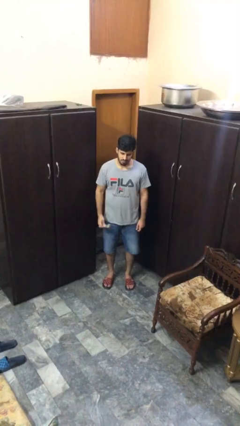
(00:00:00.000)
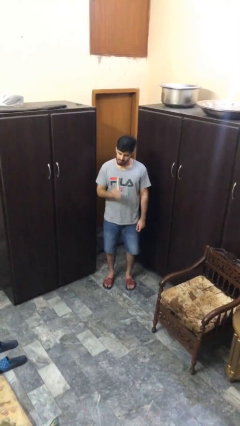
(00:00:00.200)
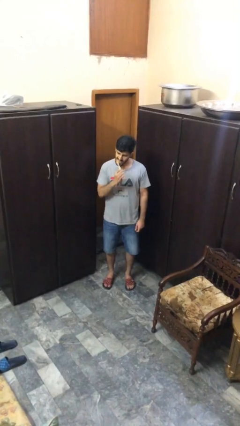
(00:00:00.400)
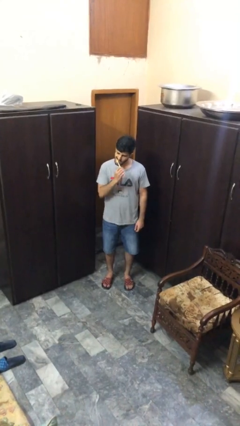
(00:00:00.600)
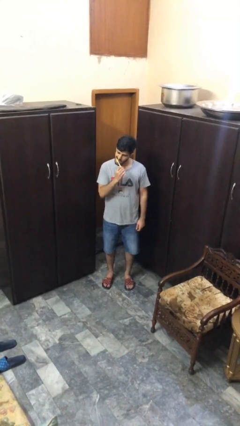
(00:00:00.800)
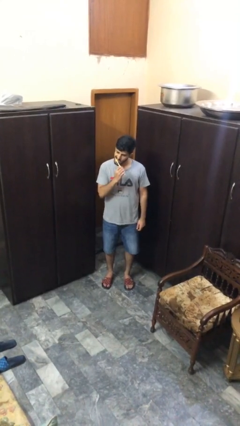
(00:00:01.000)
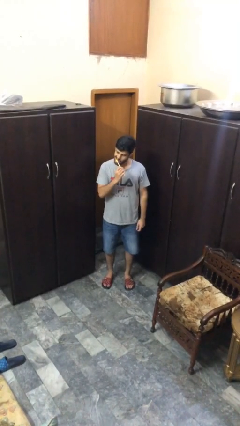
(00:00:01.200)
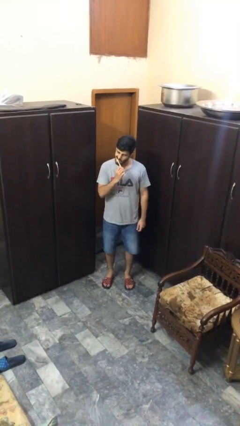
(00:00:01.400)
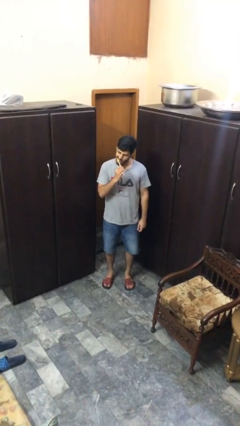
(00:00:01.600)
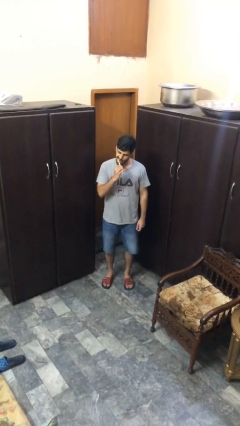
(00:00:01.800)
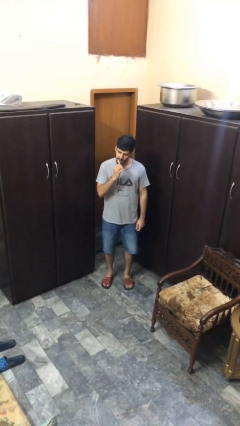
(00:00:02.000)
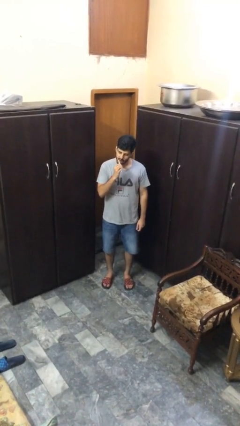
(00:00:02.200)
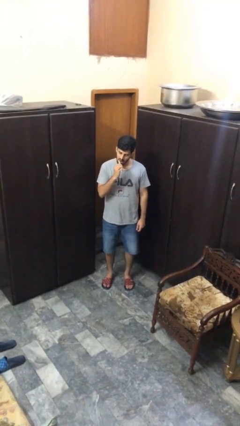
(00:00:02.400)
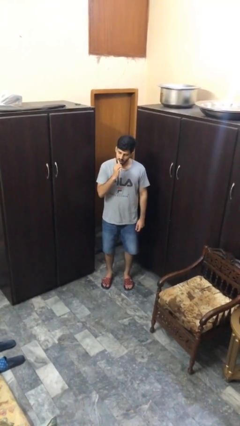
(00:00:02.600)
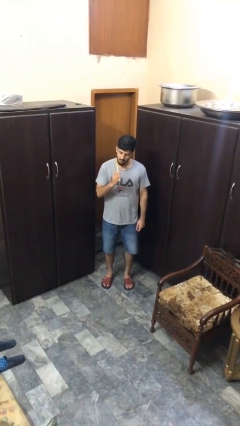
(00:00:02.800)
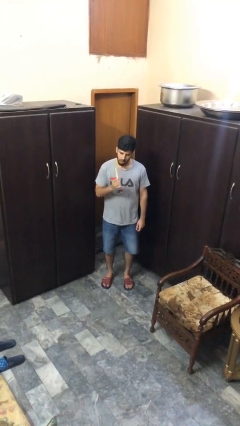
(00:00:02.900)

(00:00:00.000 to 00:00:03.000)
person brushes teeth

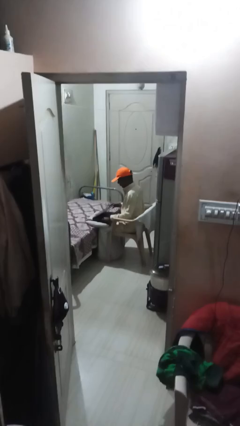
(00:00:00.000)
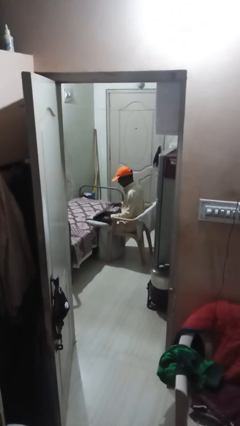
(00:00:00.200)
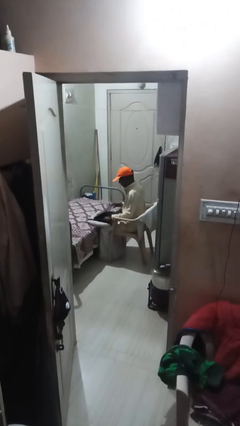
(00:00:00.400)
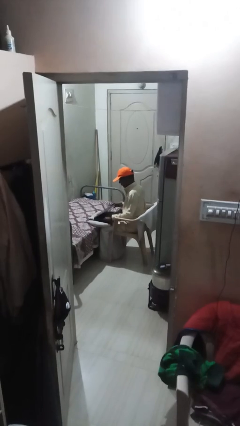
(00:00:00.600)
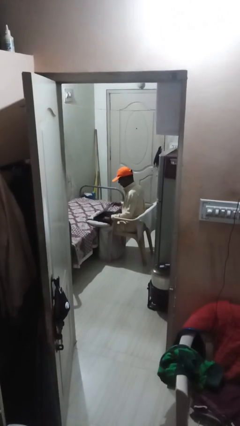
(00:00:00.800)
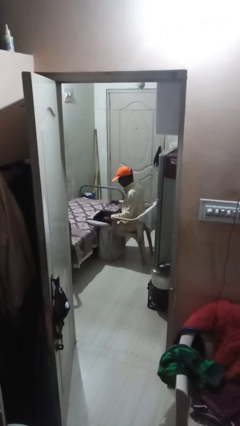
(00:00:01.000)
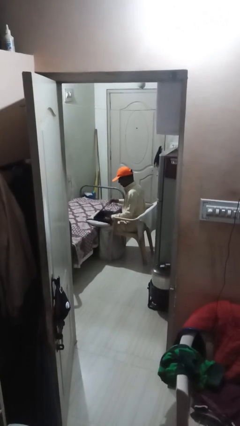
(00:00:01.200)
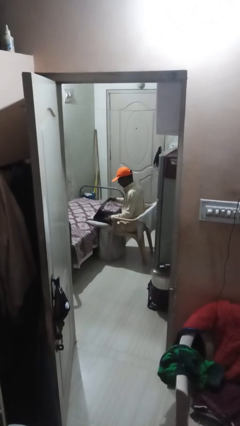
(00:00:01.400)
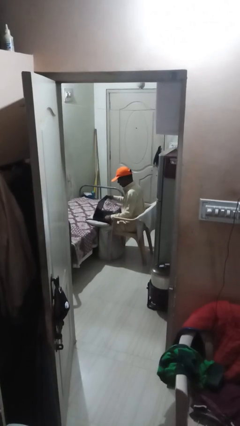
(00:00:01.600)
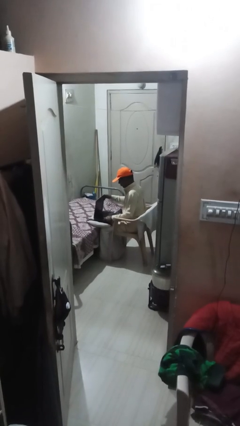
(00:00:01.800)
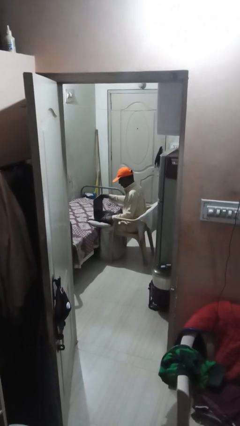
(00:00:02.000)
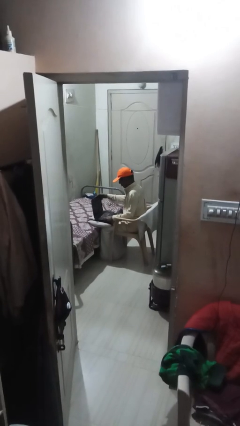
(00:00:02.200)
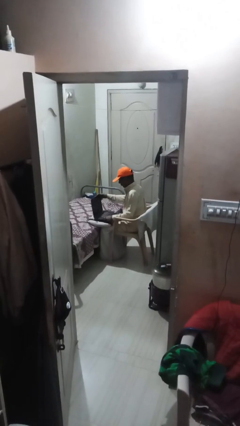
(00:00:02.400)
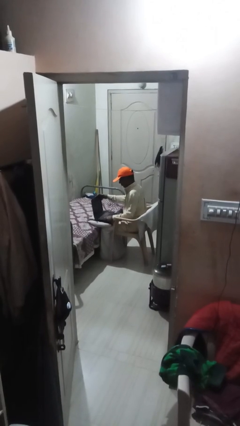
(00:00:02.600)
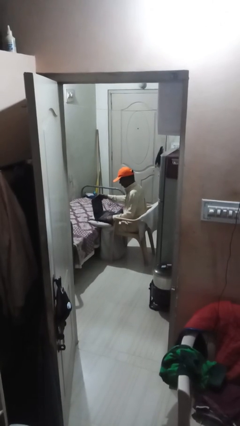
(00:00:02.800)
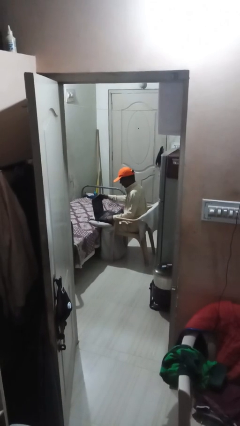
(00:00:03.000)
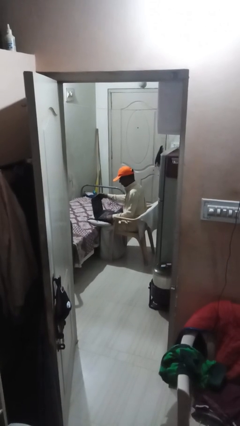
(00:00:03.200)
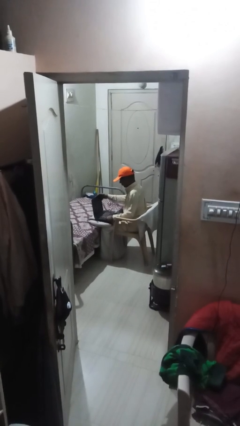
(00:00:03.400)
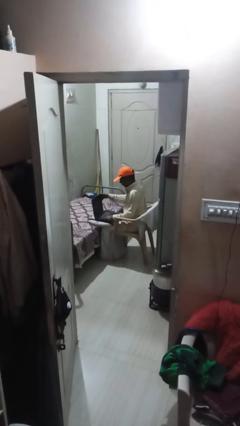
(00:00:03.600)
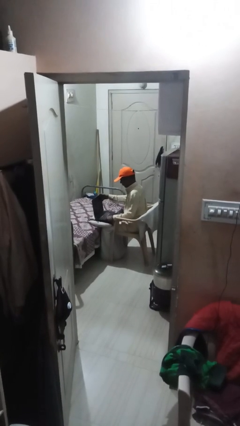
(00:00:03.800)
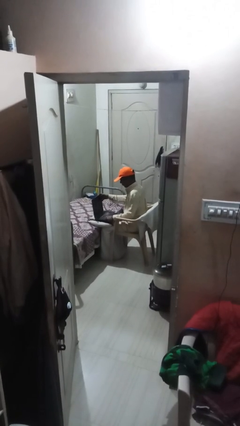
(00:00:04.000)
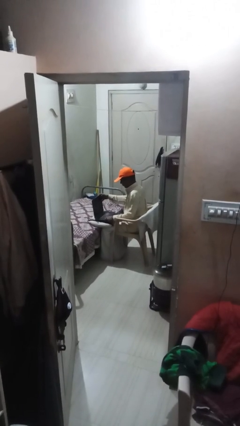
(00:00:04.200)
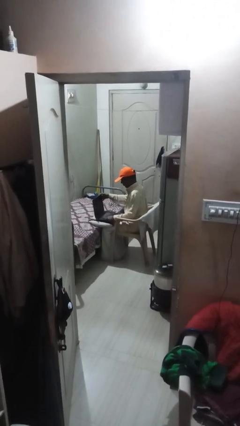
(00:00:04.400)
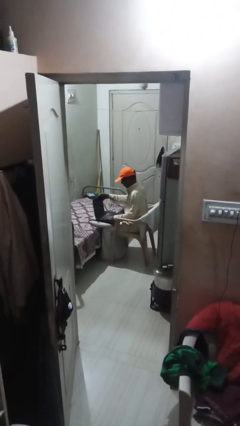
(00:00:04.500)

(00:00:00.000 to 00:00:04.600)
person interacts with laptop

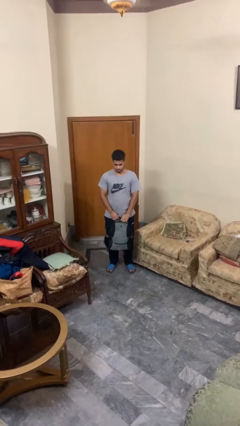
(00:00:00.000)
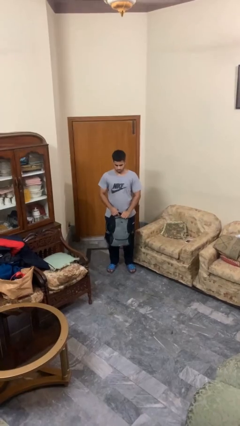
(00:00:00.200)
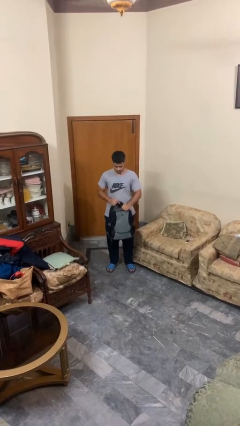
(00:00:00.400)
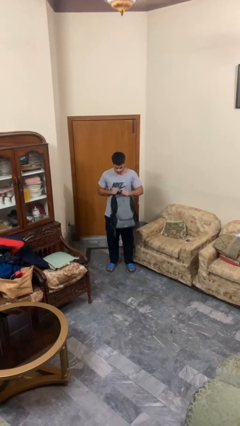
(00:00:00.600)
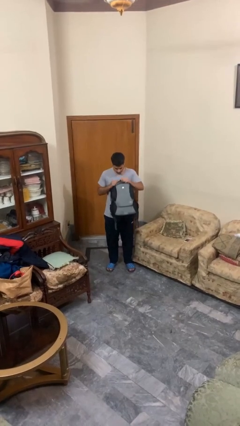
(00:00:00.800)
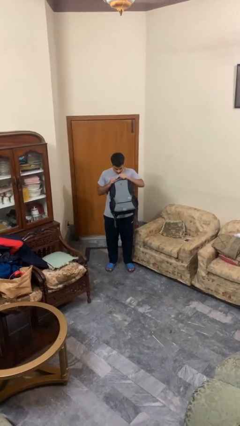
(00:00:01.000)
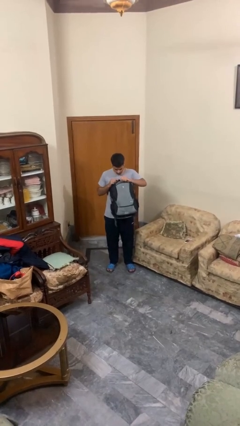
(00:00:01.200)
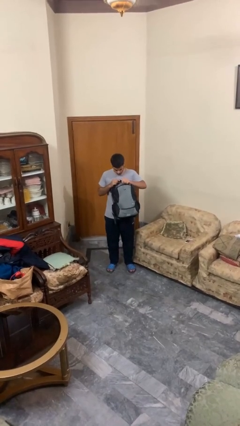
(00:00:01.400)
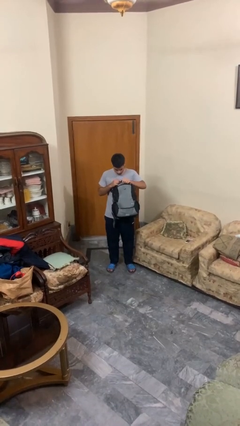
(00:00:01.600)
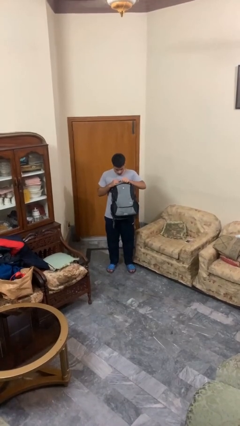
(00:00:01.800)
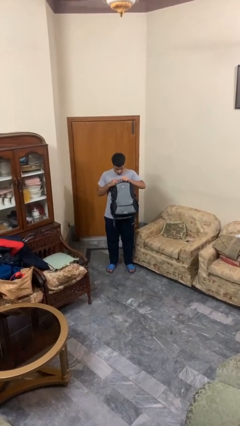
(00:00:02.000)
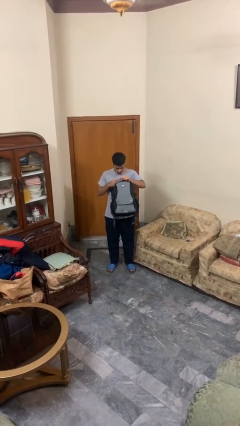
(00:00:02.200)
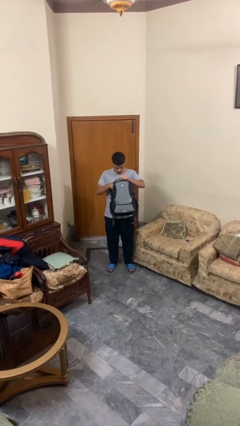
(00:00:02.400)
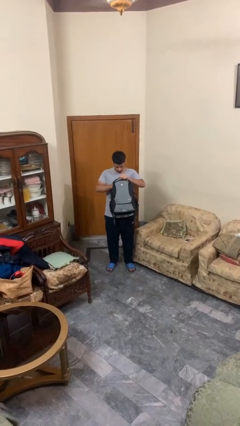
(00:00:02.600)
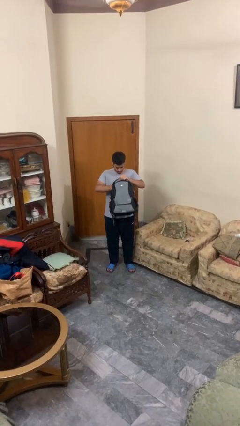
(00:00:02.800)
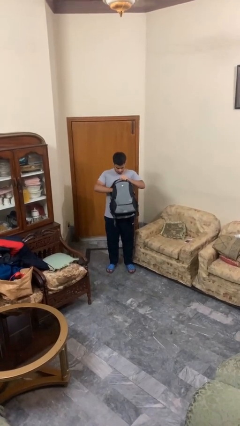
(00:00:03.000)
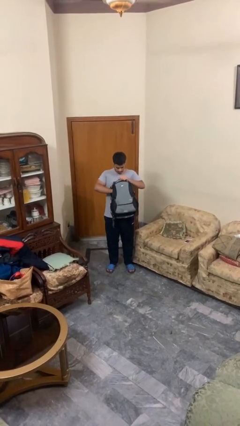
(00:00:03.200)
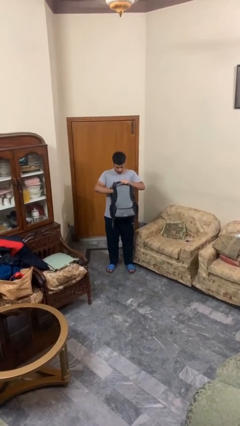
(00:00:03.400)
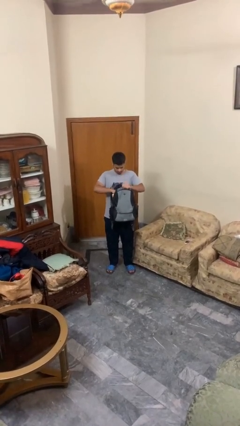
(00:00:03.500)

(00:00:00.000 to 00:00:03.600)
person searches in backpack

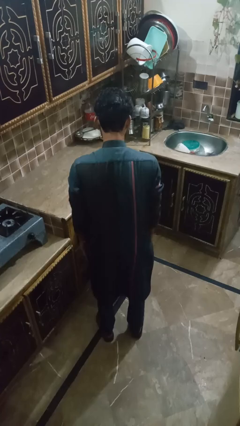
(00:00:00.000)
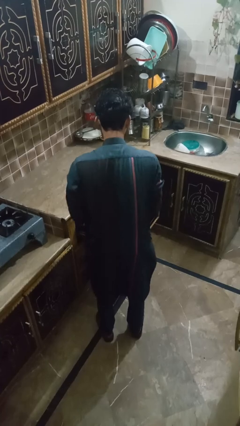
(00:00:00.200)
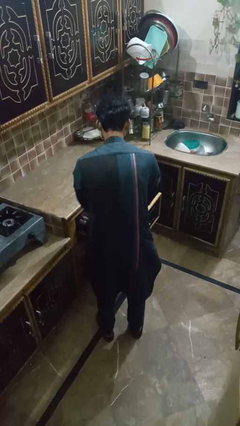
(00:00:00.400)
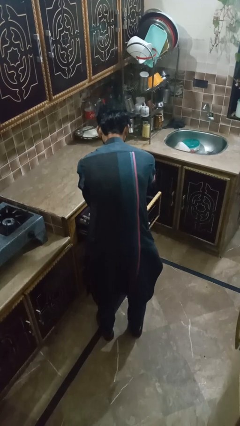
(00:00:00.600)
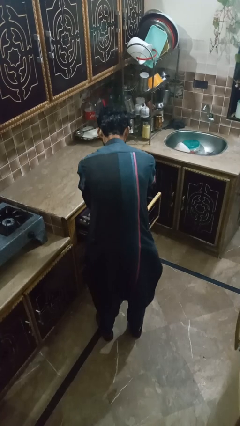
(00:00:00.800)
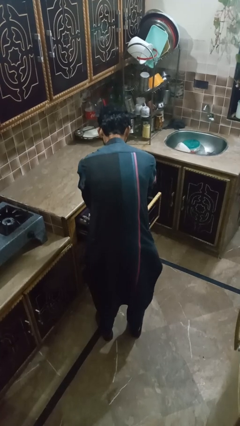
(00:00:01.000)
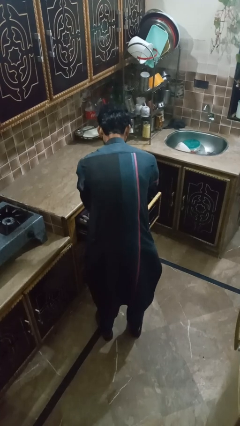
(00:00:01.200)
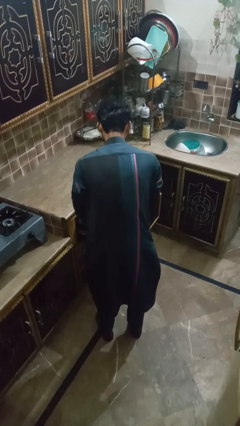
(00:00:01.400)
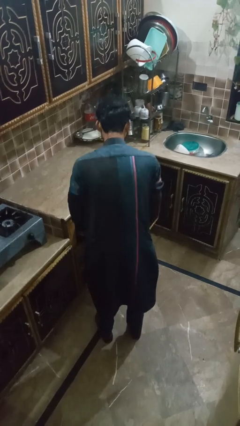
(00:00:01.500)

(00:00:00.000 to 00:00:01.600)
person searches in kitchen drawer

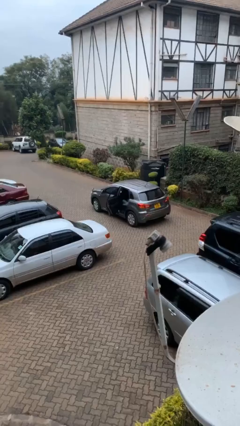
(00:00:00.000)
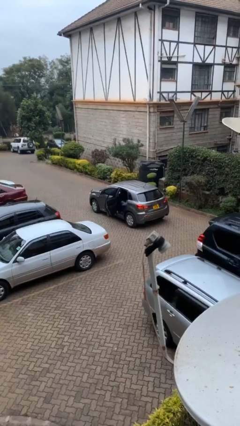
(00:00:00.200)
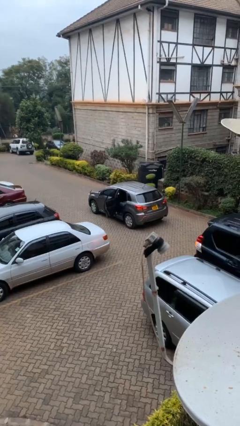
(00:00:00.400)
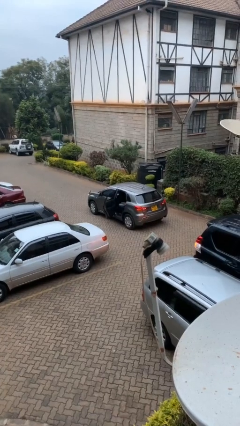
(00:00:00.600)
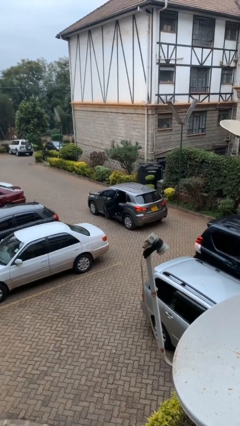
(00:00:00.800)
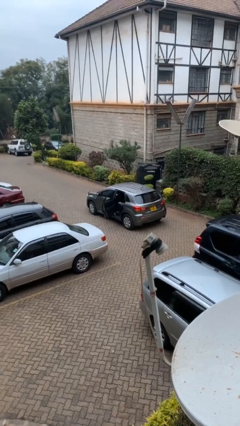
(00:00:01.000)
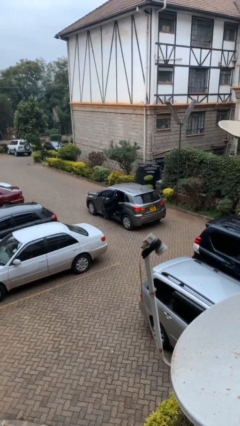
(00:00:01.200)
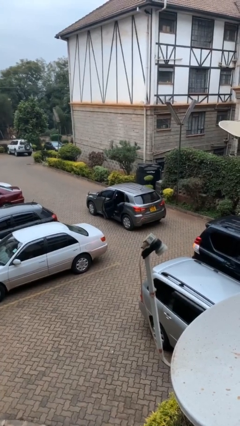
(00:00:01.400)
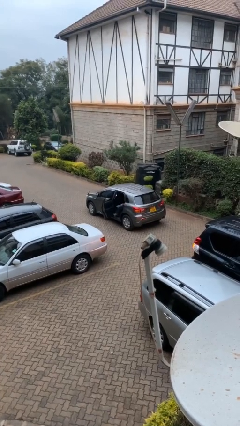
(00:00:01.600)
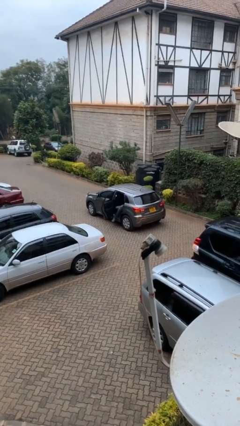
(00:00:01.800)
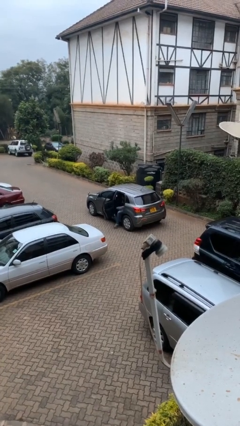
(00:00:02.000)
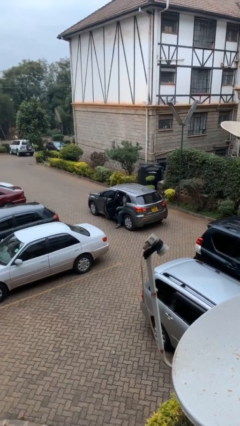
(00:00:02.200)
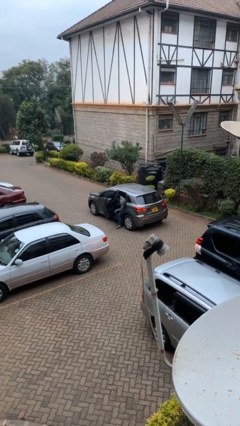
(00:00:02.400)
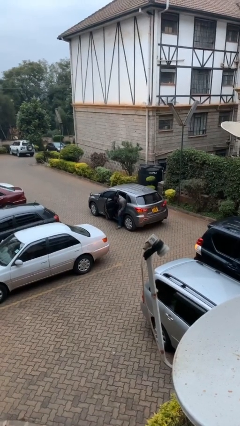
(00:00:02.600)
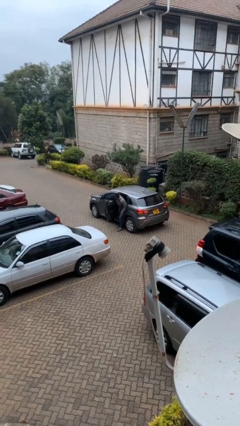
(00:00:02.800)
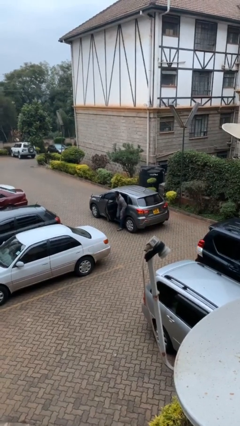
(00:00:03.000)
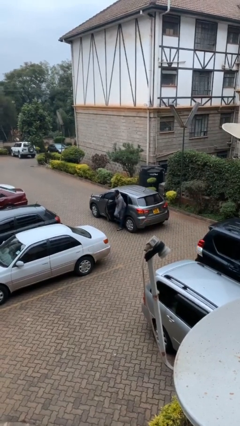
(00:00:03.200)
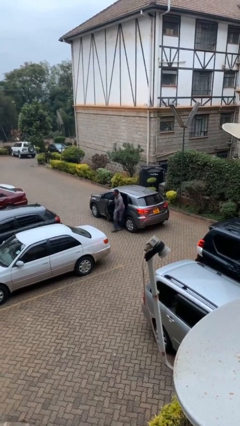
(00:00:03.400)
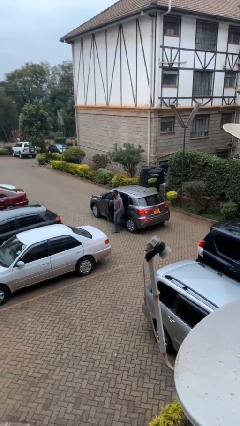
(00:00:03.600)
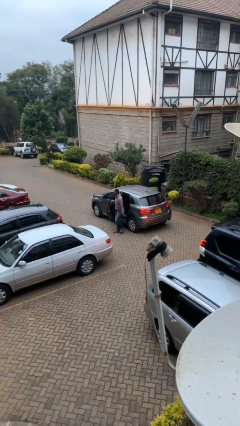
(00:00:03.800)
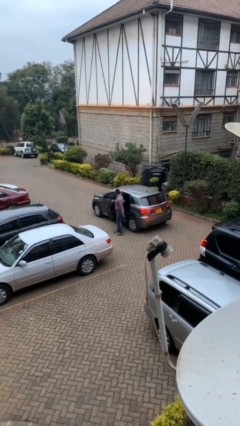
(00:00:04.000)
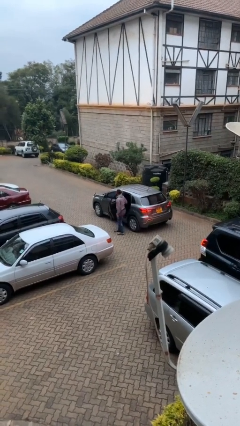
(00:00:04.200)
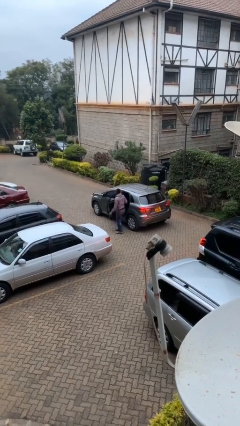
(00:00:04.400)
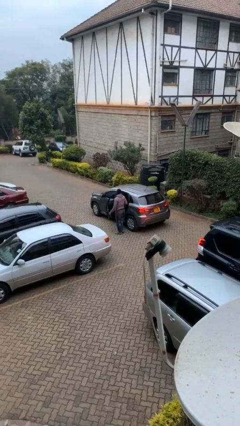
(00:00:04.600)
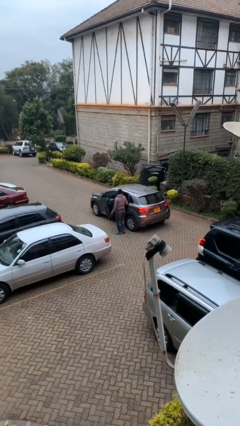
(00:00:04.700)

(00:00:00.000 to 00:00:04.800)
person exits car
